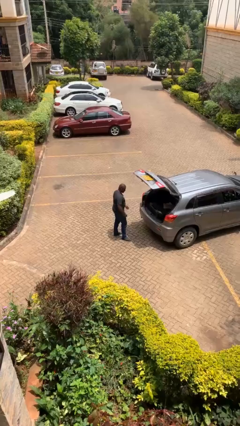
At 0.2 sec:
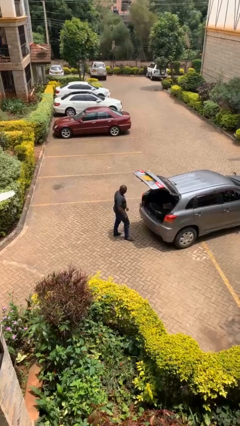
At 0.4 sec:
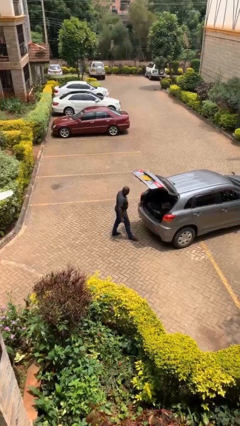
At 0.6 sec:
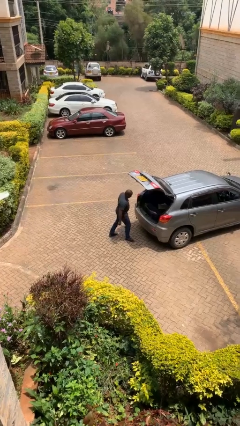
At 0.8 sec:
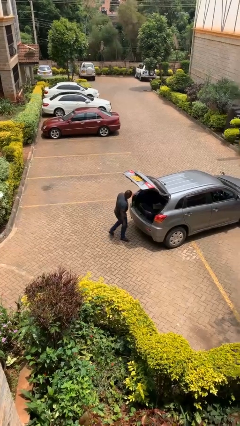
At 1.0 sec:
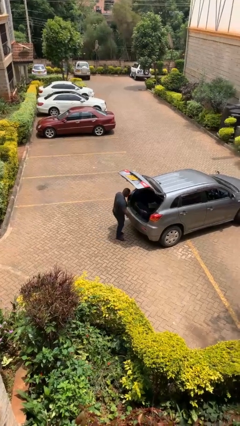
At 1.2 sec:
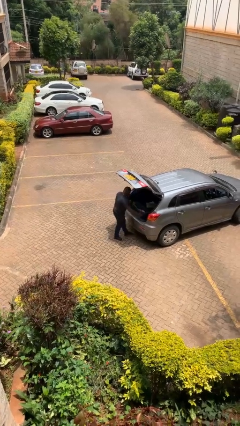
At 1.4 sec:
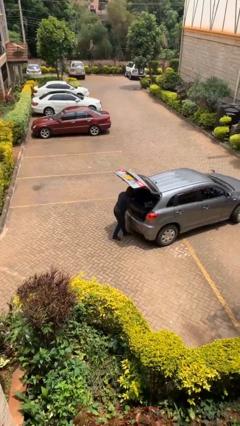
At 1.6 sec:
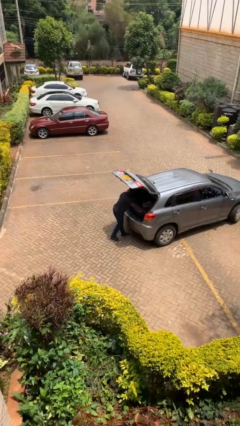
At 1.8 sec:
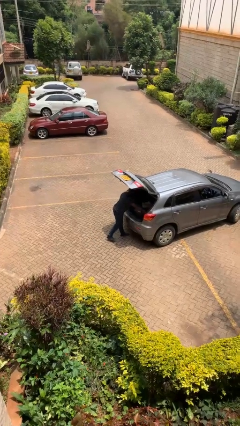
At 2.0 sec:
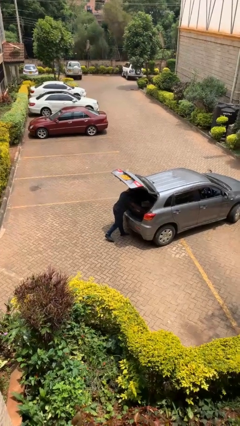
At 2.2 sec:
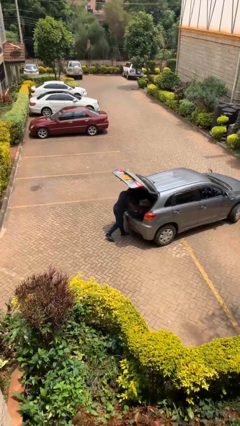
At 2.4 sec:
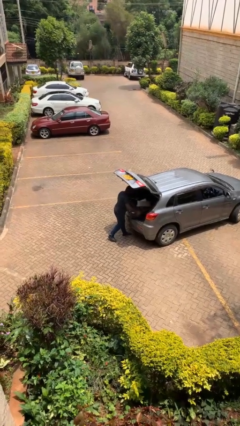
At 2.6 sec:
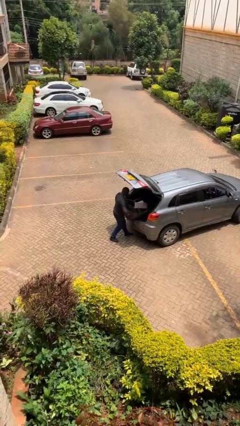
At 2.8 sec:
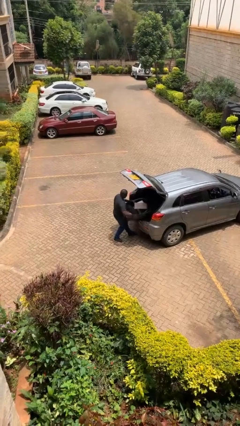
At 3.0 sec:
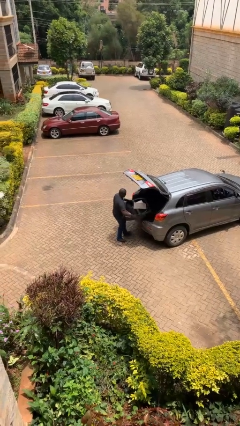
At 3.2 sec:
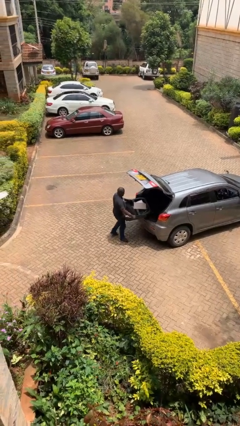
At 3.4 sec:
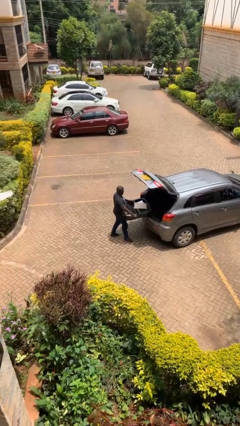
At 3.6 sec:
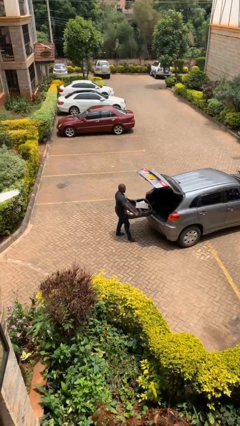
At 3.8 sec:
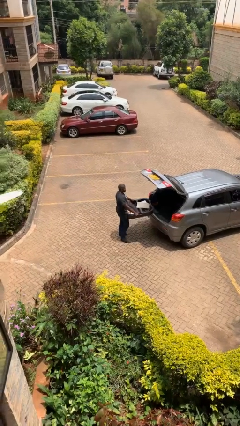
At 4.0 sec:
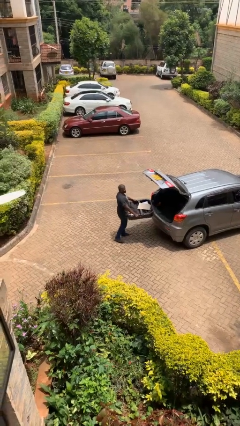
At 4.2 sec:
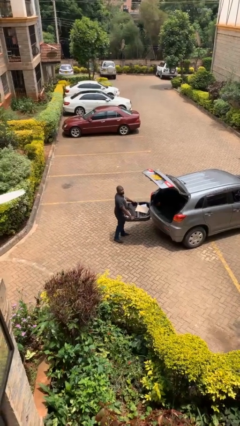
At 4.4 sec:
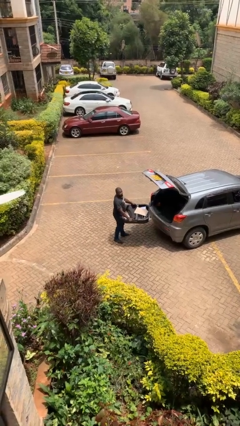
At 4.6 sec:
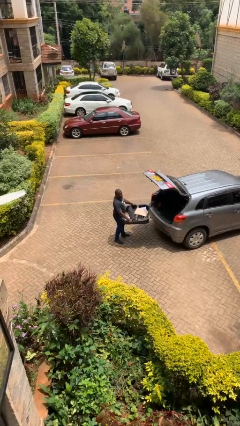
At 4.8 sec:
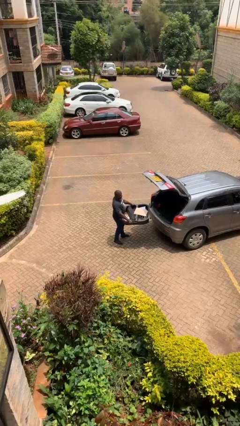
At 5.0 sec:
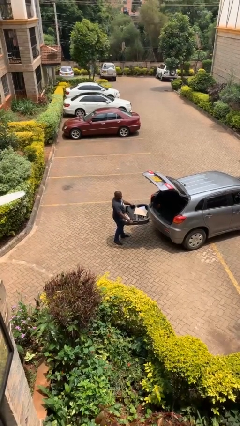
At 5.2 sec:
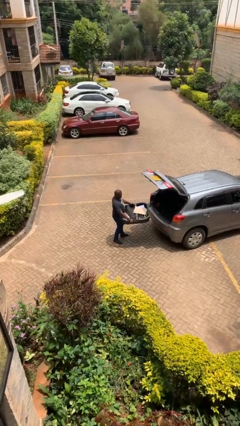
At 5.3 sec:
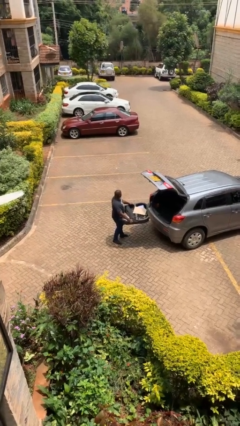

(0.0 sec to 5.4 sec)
person unloads car

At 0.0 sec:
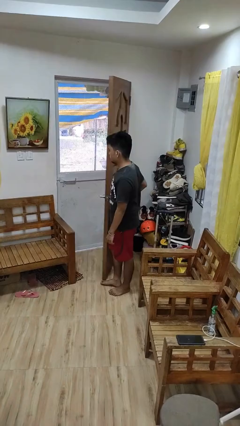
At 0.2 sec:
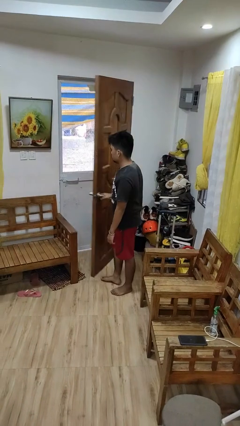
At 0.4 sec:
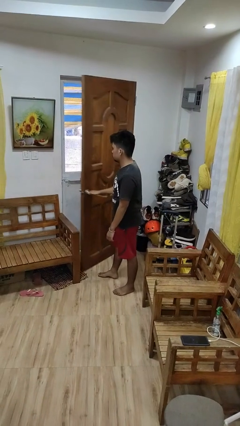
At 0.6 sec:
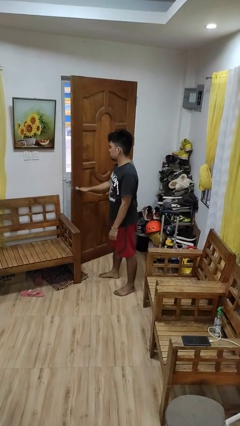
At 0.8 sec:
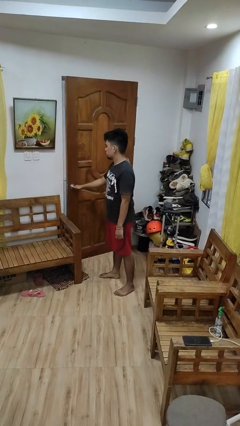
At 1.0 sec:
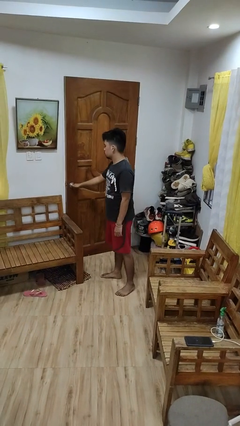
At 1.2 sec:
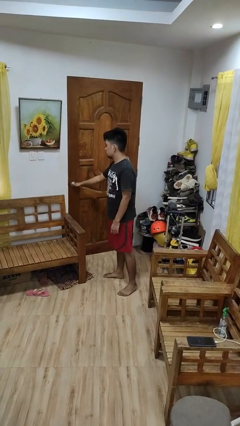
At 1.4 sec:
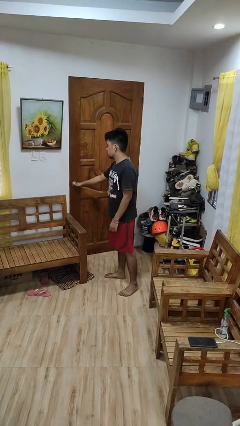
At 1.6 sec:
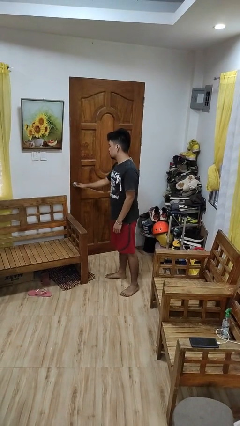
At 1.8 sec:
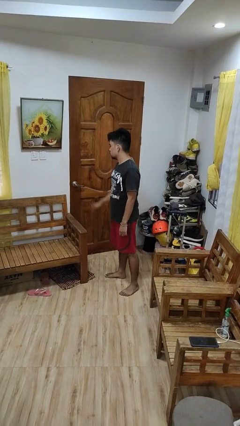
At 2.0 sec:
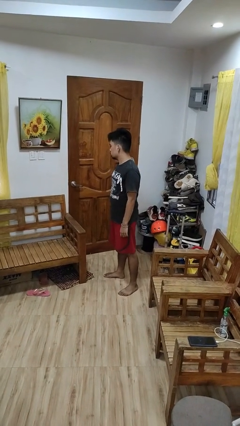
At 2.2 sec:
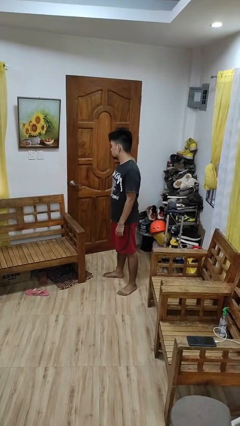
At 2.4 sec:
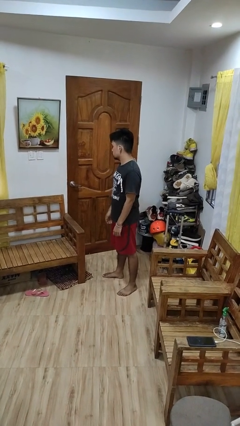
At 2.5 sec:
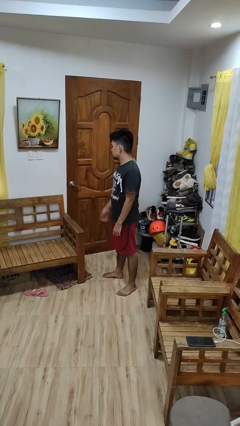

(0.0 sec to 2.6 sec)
person closes facility door

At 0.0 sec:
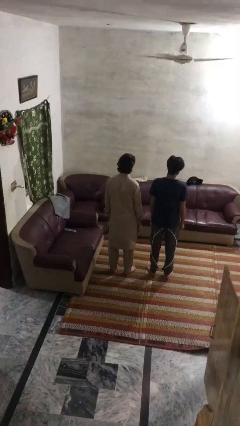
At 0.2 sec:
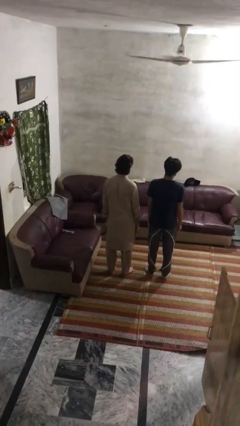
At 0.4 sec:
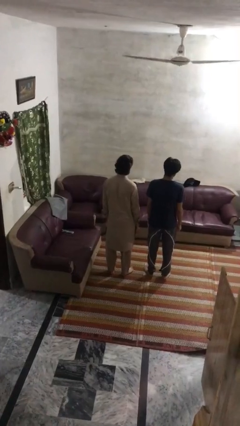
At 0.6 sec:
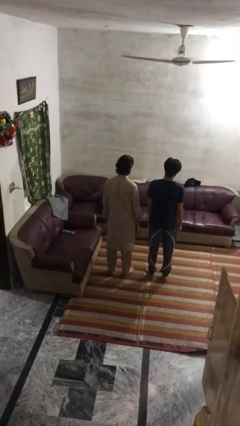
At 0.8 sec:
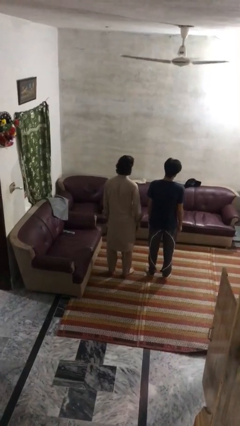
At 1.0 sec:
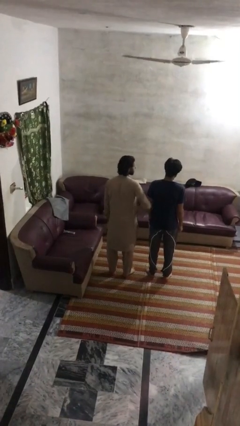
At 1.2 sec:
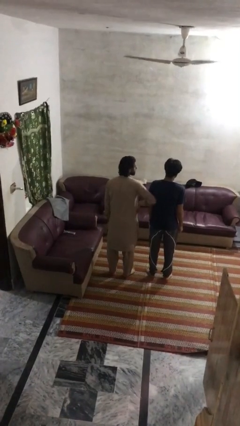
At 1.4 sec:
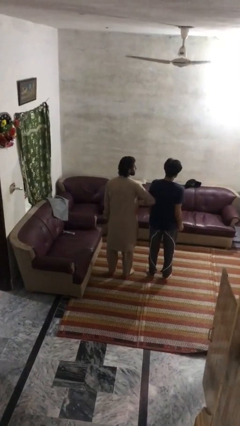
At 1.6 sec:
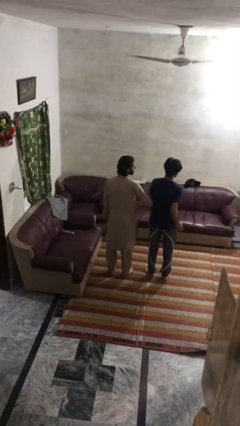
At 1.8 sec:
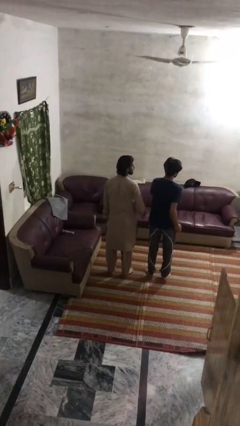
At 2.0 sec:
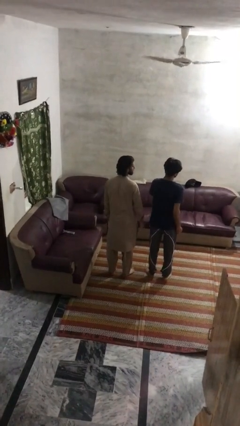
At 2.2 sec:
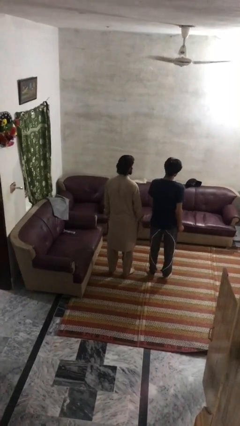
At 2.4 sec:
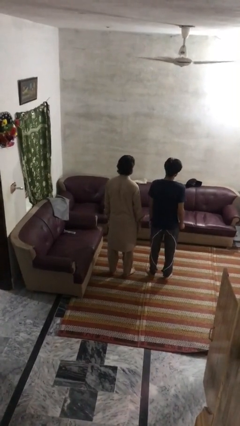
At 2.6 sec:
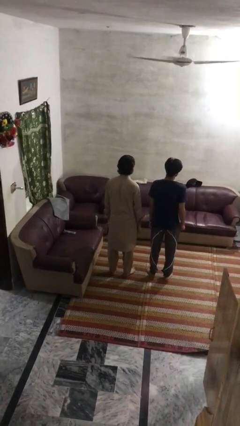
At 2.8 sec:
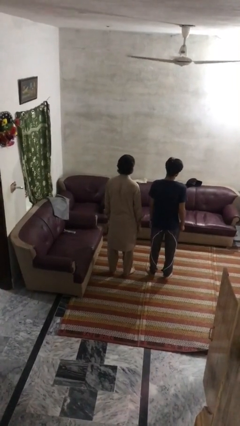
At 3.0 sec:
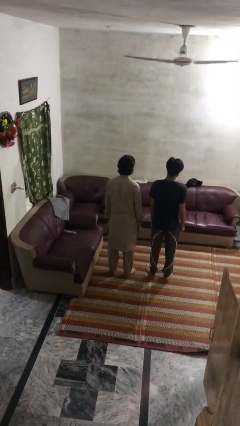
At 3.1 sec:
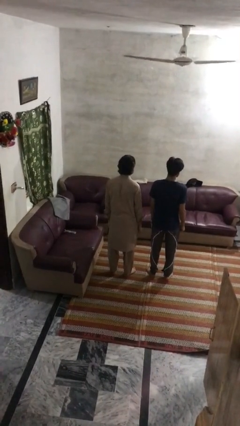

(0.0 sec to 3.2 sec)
person nudges person with elbow

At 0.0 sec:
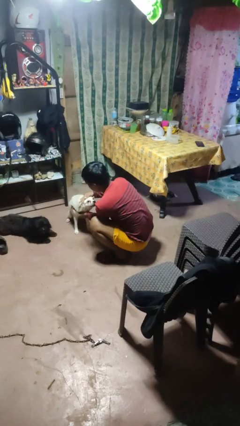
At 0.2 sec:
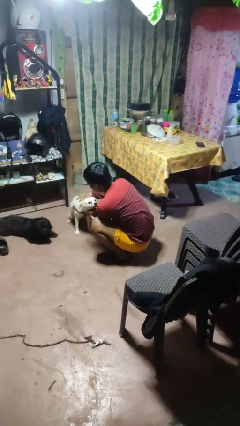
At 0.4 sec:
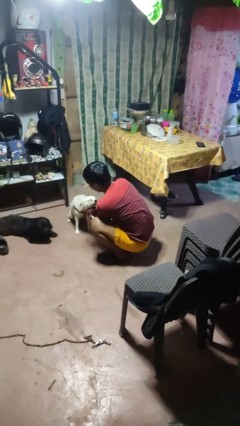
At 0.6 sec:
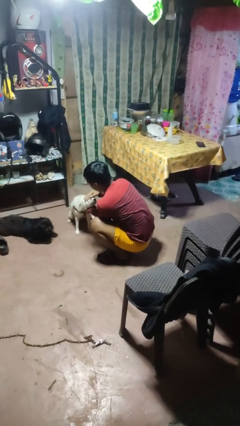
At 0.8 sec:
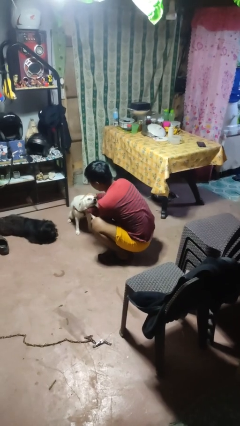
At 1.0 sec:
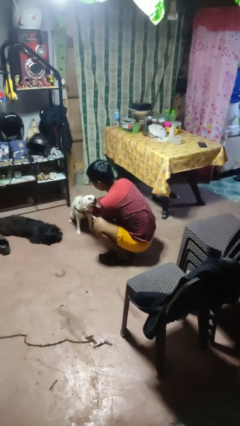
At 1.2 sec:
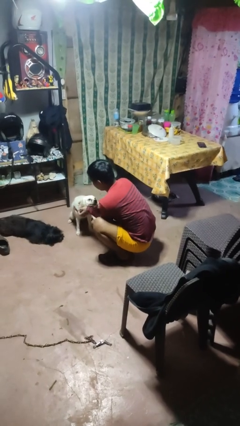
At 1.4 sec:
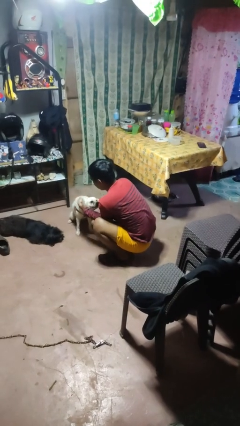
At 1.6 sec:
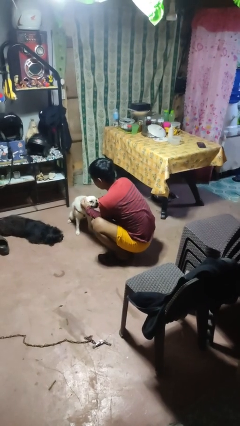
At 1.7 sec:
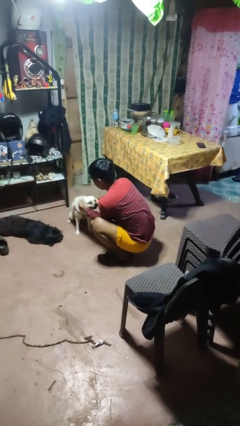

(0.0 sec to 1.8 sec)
person pets dog

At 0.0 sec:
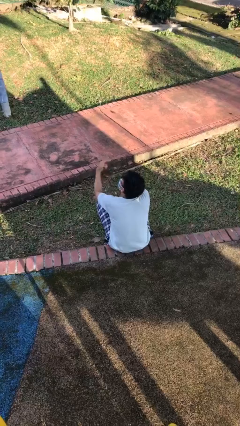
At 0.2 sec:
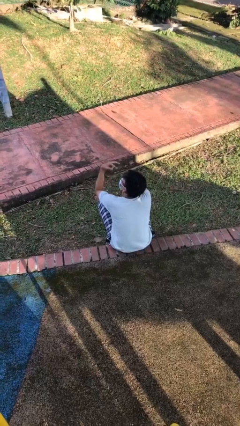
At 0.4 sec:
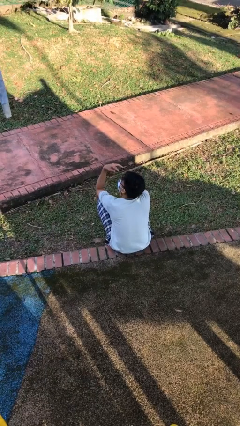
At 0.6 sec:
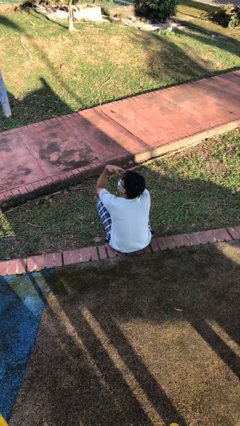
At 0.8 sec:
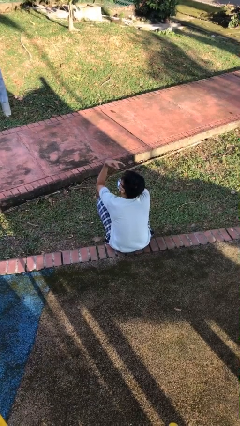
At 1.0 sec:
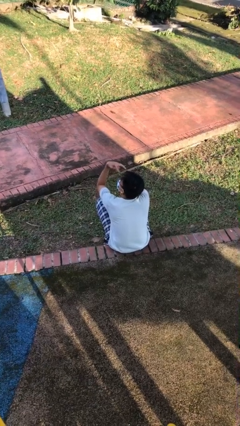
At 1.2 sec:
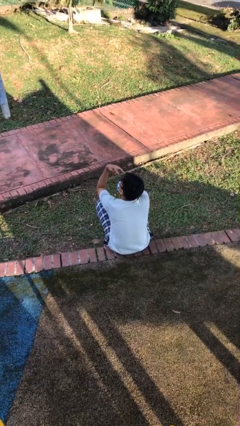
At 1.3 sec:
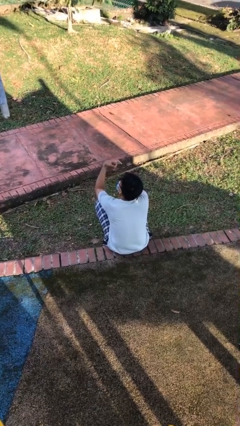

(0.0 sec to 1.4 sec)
person gestures watch closely

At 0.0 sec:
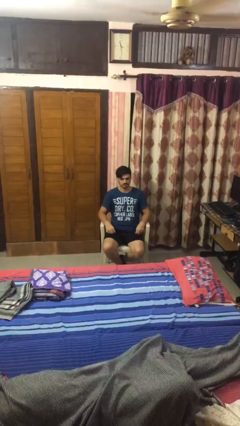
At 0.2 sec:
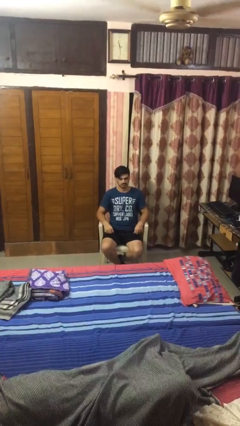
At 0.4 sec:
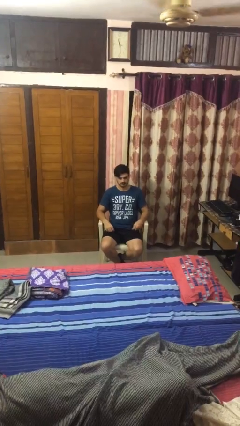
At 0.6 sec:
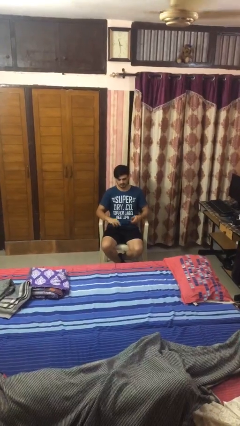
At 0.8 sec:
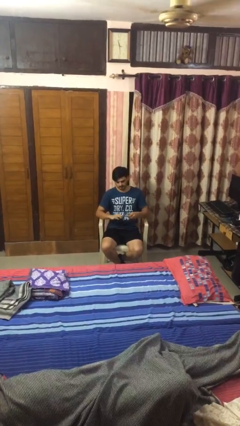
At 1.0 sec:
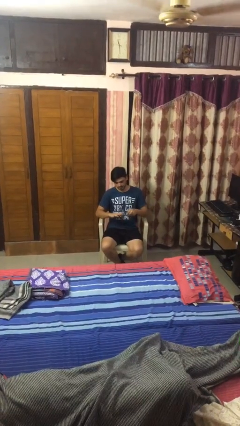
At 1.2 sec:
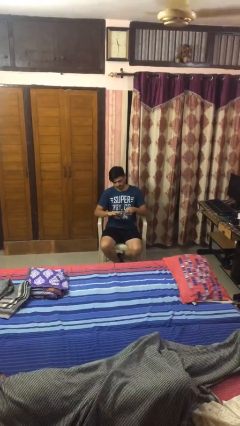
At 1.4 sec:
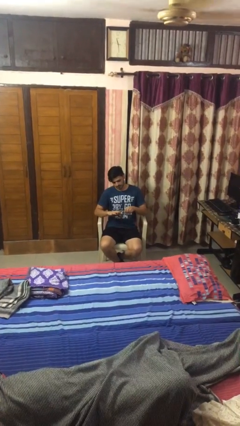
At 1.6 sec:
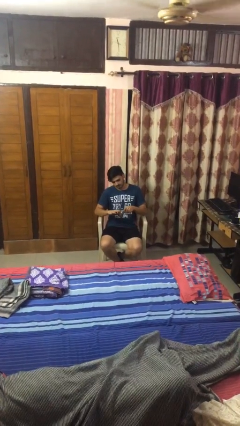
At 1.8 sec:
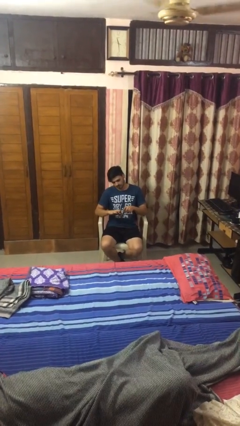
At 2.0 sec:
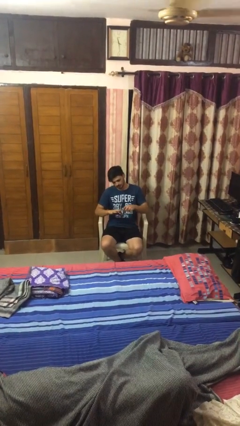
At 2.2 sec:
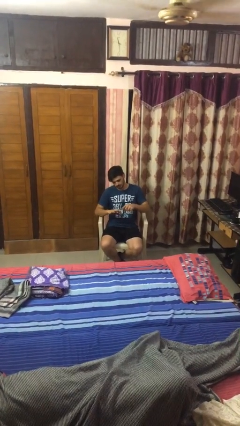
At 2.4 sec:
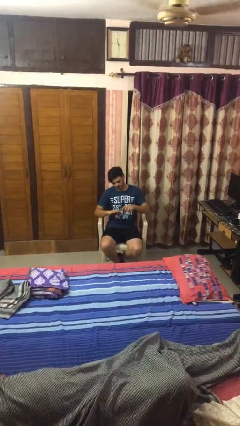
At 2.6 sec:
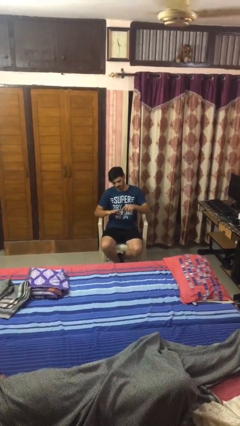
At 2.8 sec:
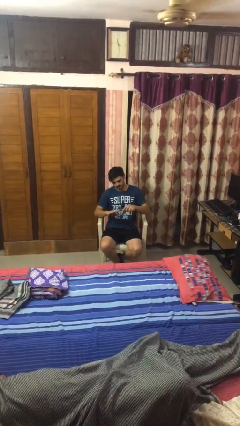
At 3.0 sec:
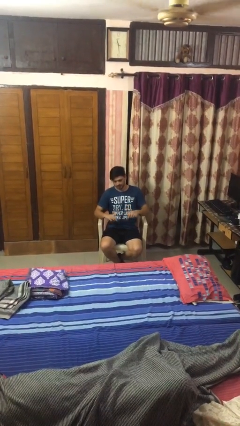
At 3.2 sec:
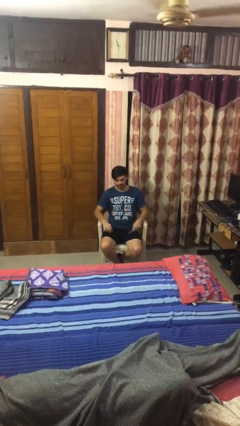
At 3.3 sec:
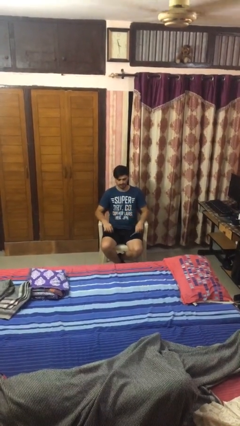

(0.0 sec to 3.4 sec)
person files fingernails
